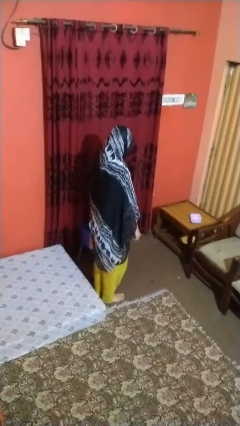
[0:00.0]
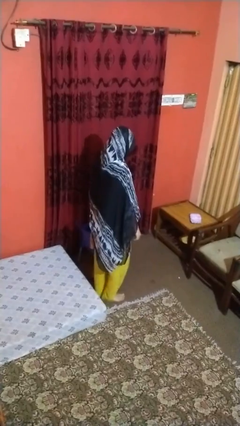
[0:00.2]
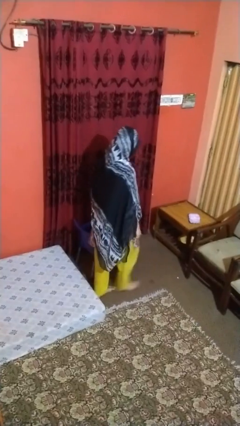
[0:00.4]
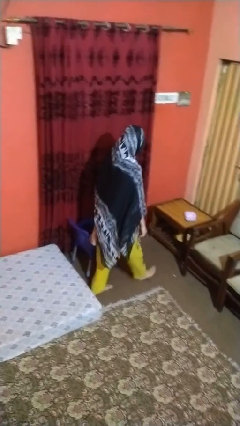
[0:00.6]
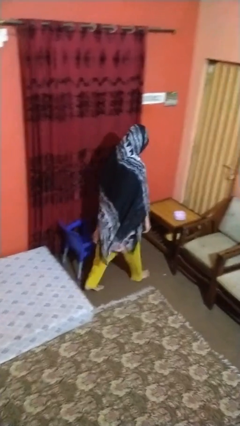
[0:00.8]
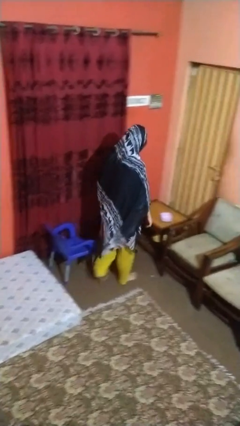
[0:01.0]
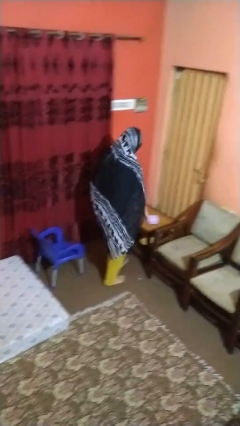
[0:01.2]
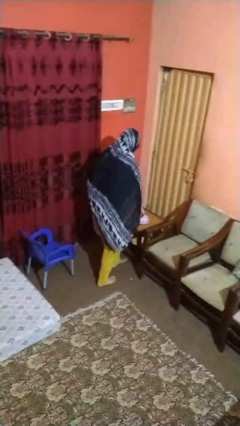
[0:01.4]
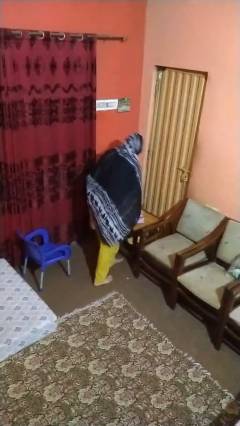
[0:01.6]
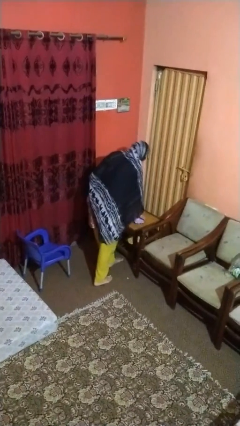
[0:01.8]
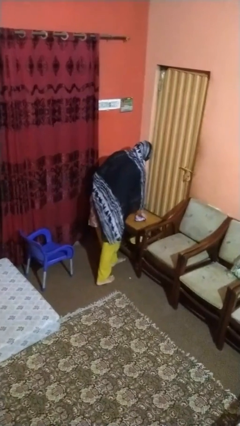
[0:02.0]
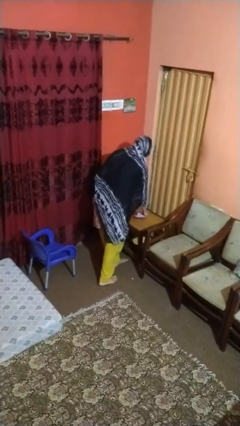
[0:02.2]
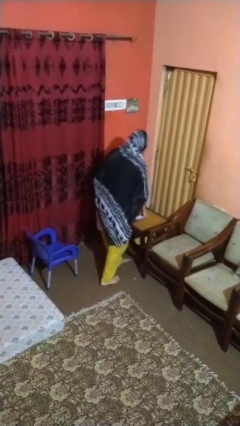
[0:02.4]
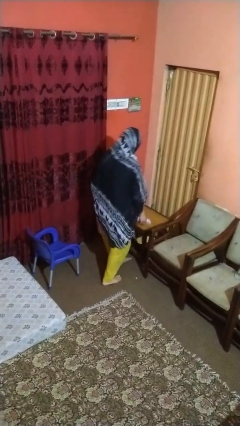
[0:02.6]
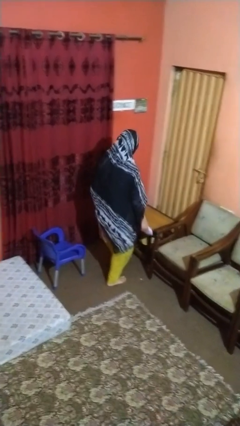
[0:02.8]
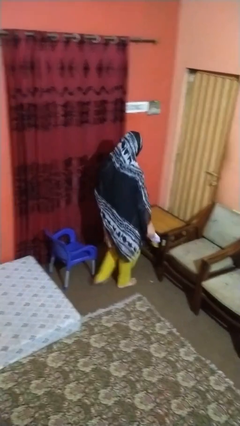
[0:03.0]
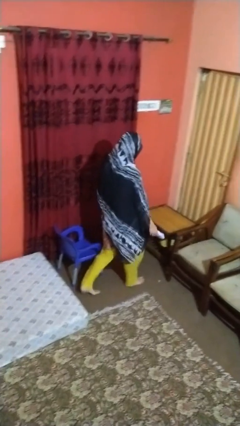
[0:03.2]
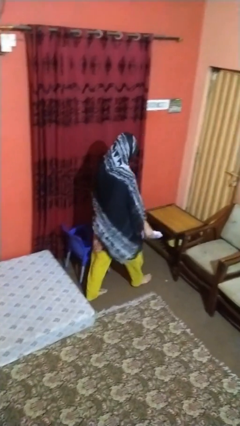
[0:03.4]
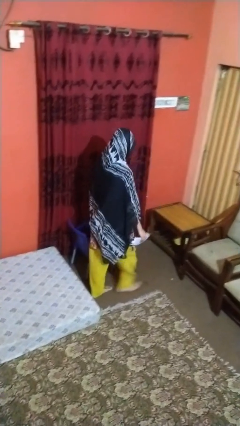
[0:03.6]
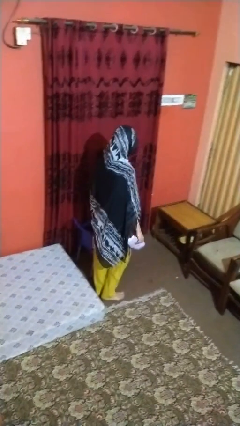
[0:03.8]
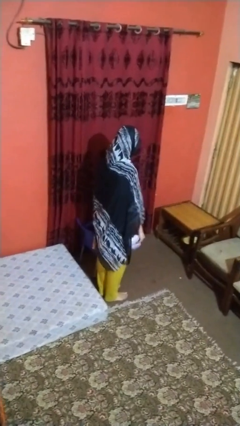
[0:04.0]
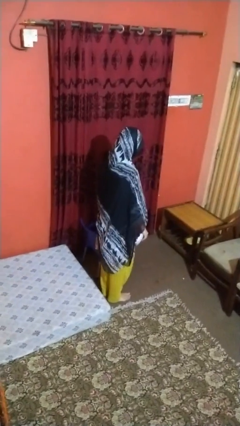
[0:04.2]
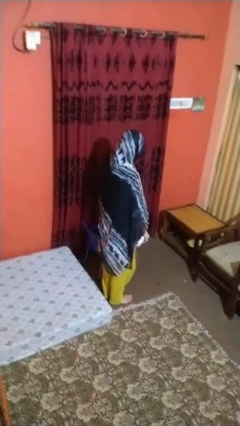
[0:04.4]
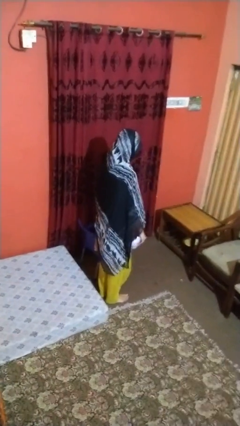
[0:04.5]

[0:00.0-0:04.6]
person picks up object from table

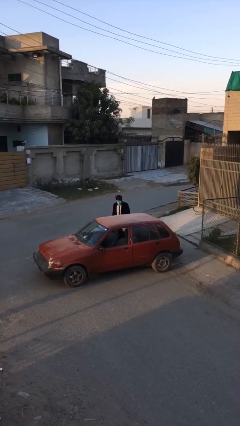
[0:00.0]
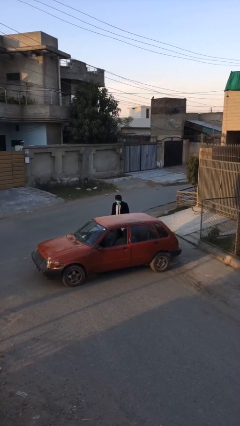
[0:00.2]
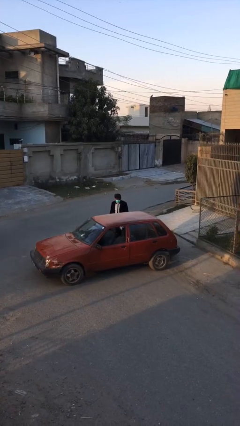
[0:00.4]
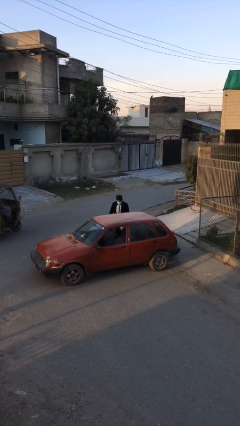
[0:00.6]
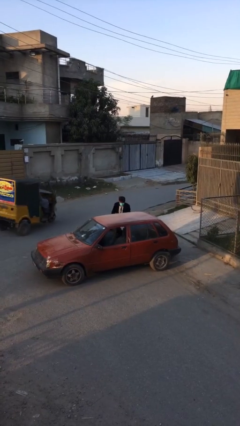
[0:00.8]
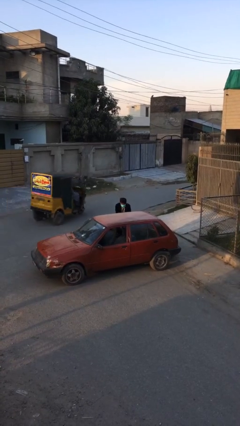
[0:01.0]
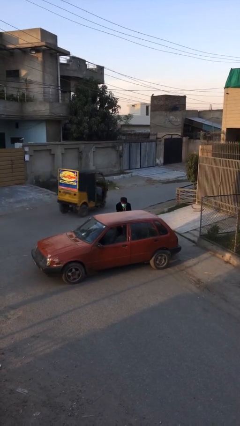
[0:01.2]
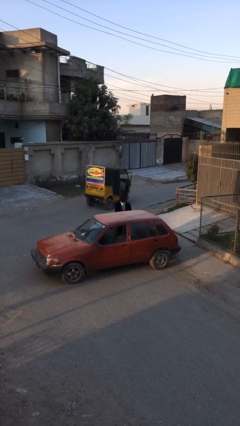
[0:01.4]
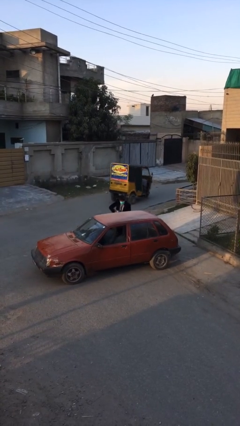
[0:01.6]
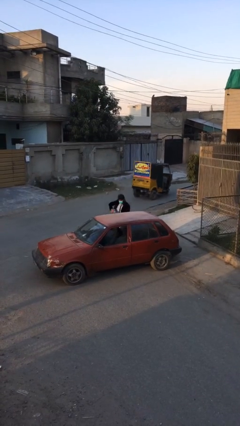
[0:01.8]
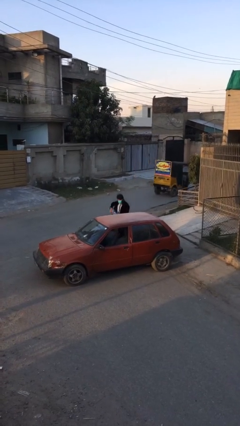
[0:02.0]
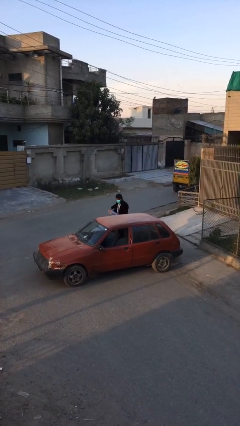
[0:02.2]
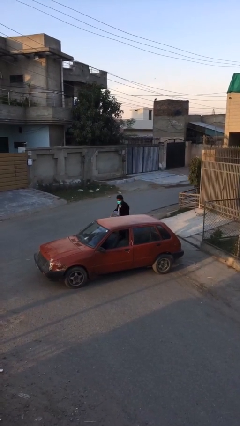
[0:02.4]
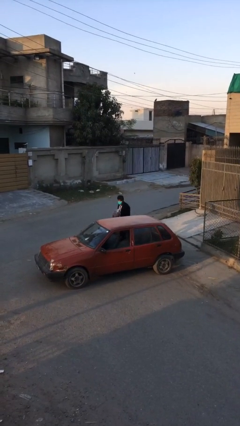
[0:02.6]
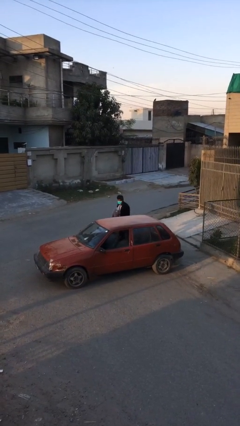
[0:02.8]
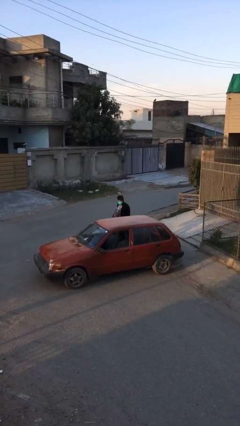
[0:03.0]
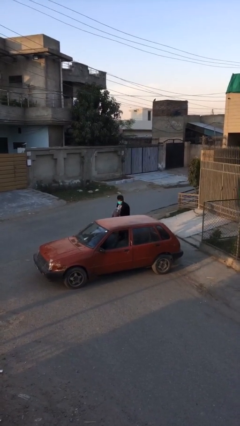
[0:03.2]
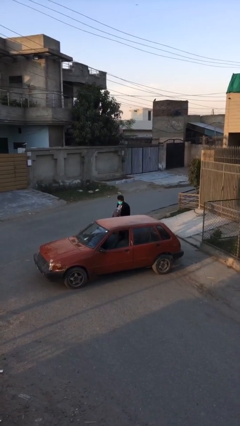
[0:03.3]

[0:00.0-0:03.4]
person unloads car

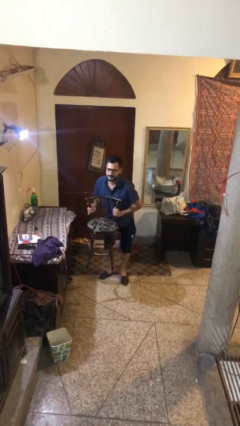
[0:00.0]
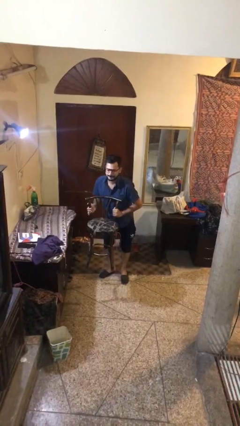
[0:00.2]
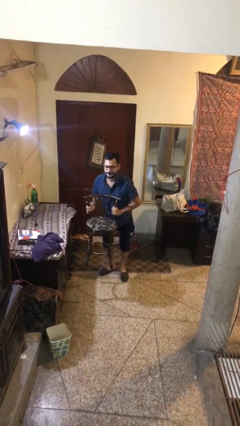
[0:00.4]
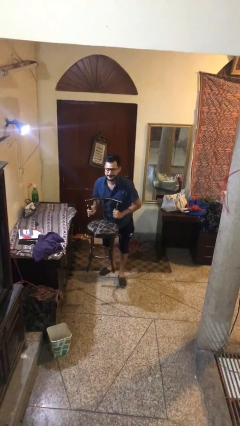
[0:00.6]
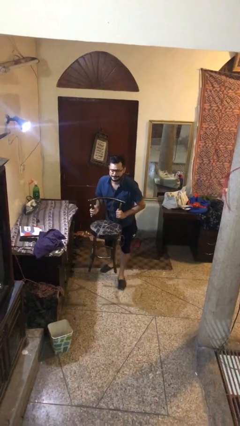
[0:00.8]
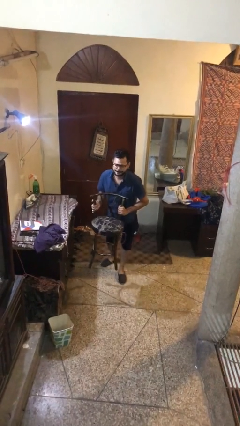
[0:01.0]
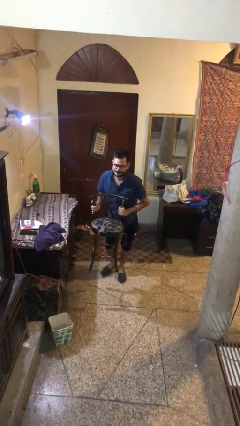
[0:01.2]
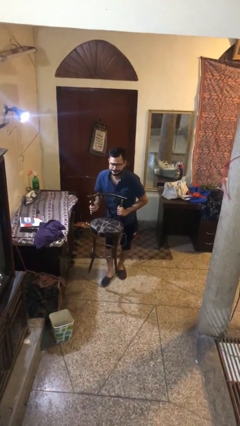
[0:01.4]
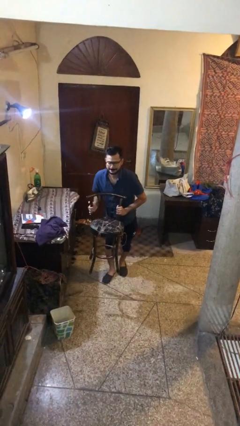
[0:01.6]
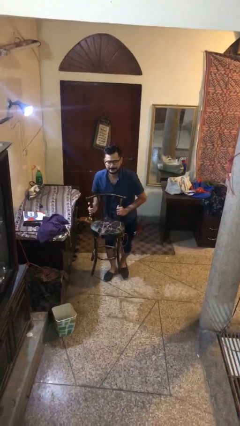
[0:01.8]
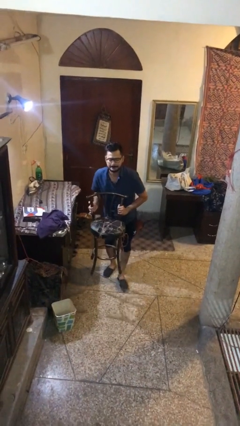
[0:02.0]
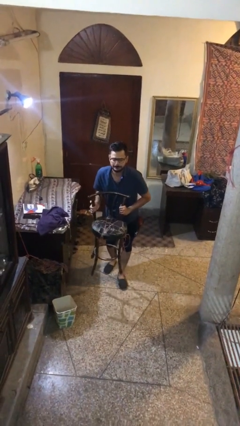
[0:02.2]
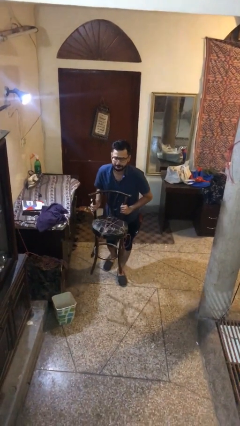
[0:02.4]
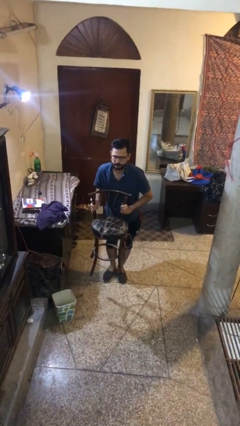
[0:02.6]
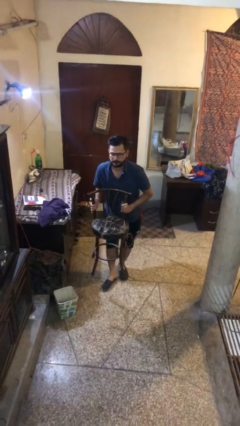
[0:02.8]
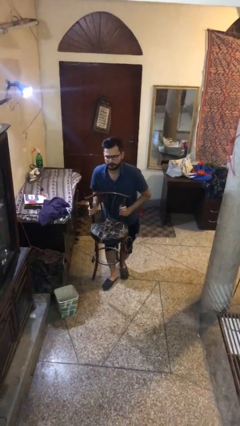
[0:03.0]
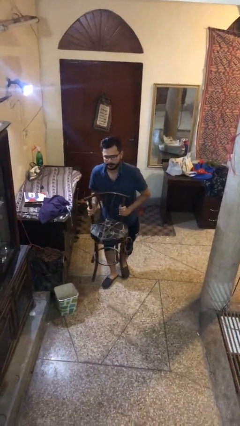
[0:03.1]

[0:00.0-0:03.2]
person carries heavy object

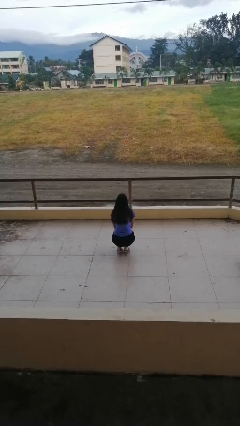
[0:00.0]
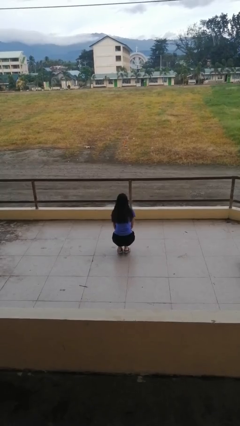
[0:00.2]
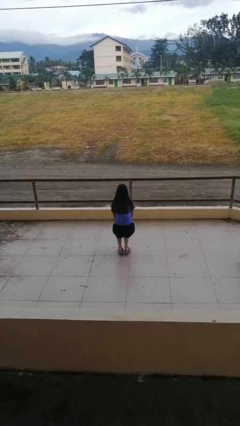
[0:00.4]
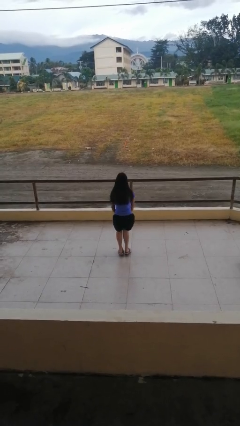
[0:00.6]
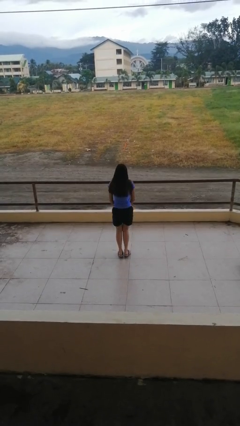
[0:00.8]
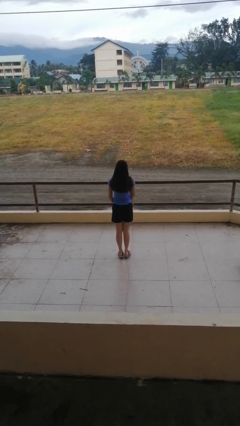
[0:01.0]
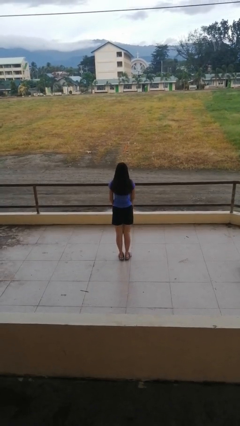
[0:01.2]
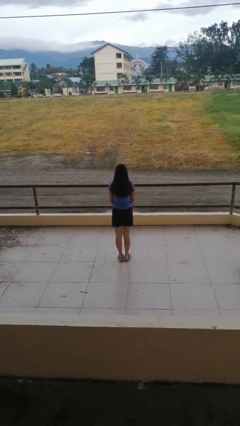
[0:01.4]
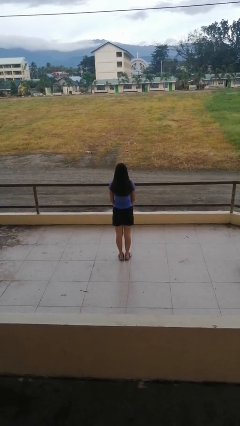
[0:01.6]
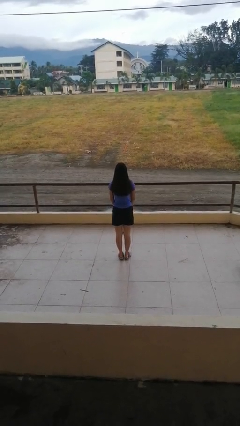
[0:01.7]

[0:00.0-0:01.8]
person stands up

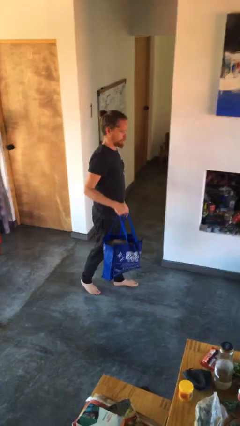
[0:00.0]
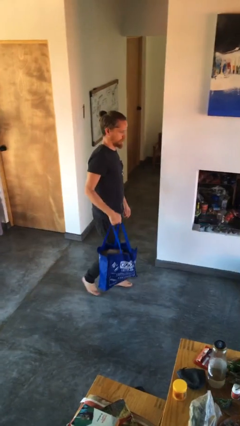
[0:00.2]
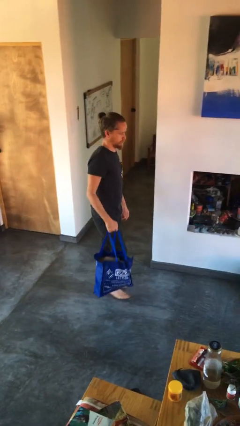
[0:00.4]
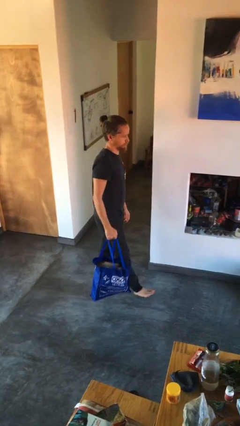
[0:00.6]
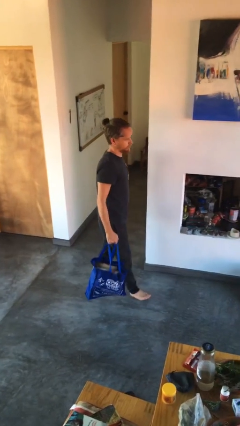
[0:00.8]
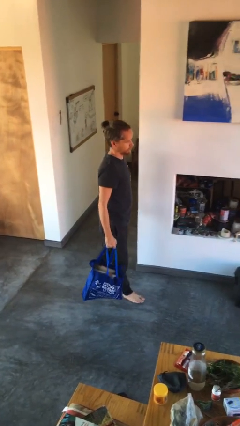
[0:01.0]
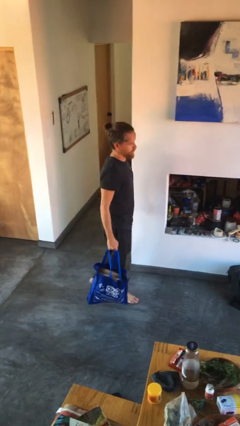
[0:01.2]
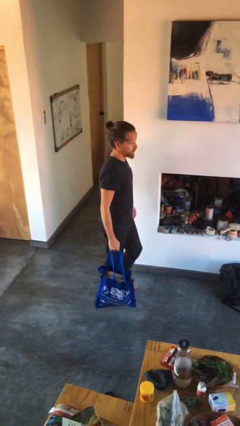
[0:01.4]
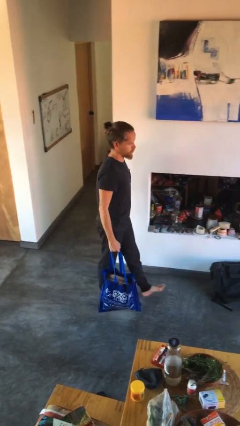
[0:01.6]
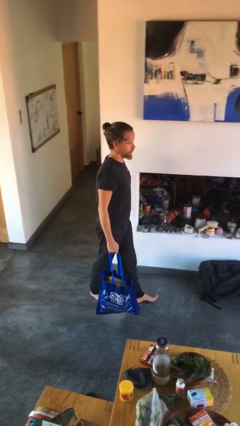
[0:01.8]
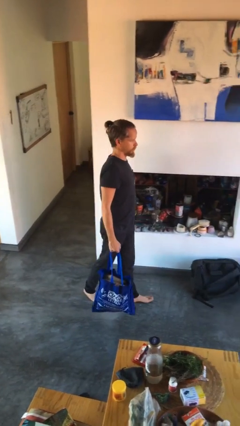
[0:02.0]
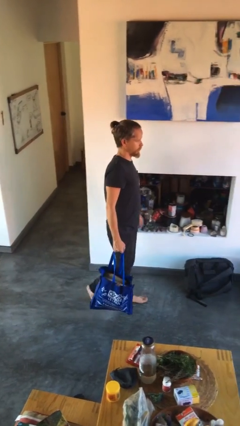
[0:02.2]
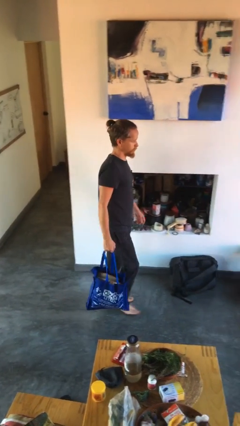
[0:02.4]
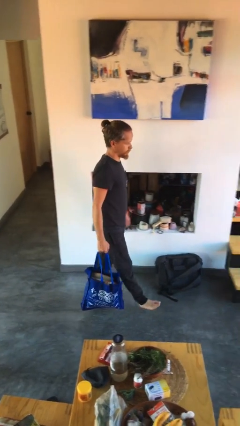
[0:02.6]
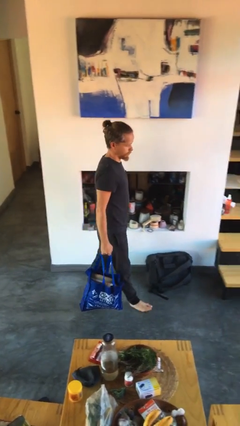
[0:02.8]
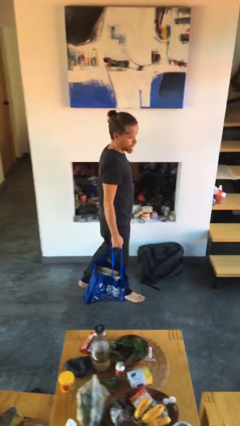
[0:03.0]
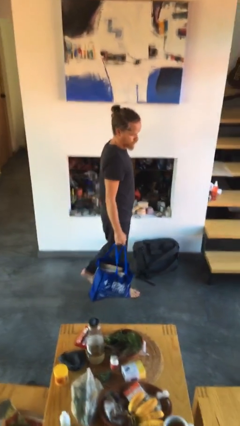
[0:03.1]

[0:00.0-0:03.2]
person carries groceries

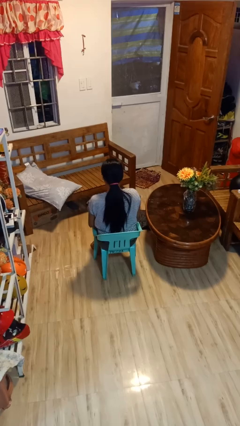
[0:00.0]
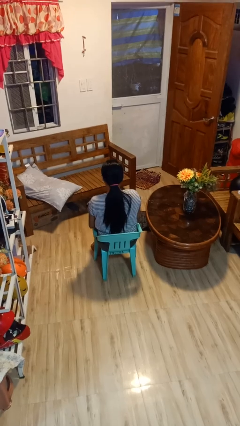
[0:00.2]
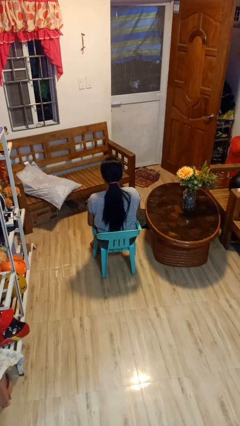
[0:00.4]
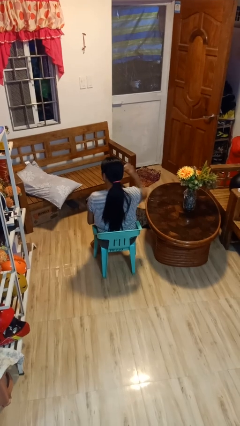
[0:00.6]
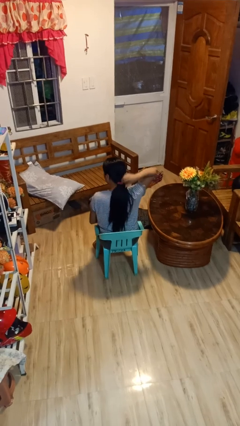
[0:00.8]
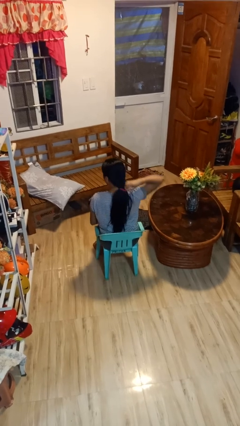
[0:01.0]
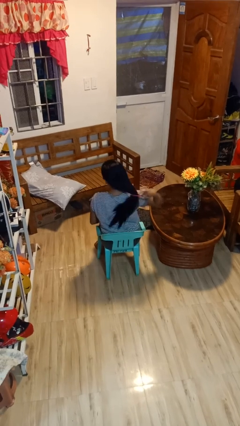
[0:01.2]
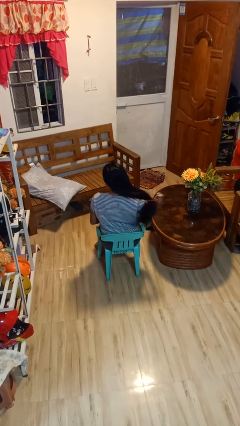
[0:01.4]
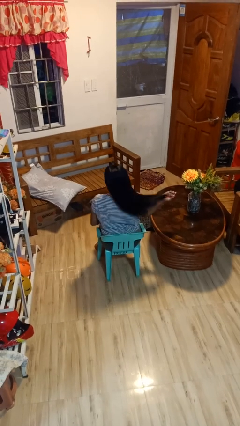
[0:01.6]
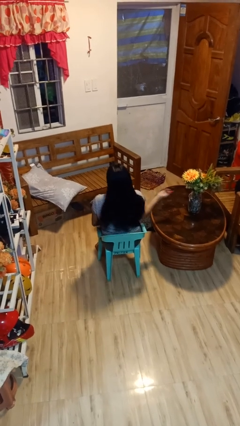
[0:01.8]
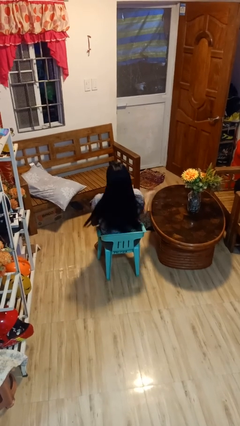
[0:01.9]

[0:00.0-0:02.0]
person takes off hairtie
